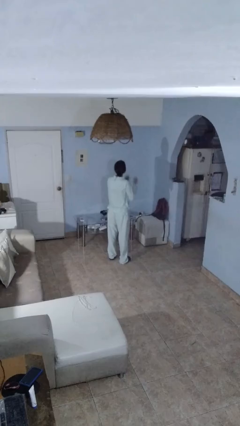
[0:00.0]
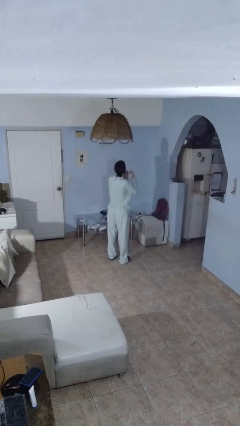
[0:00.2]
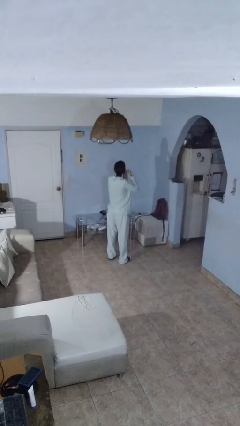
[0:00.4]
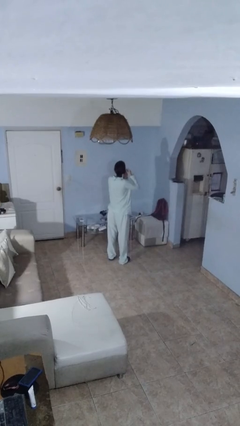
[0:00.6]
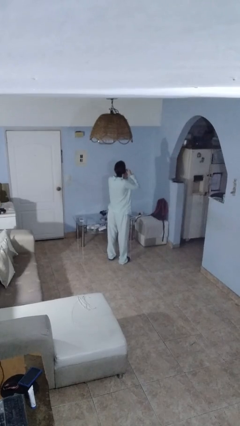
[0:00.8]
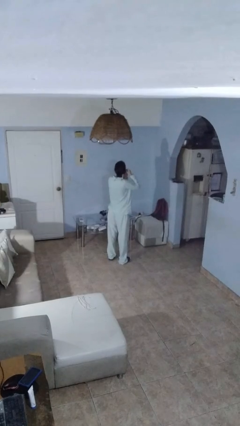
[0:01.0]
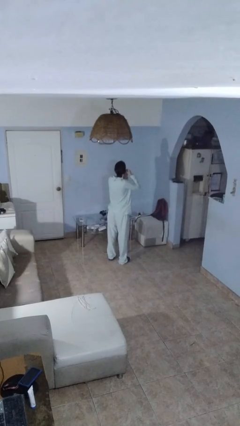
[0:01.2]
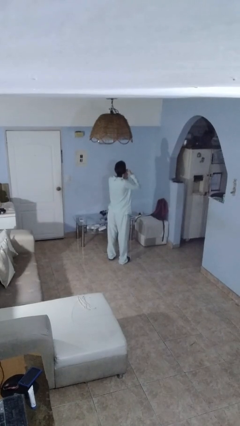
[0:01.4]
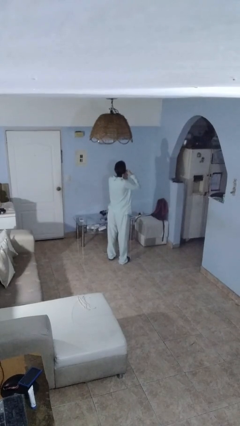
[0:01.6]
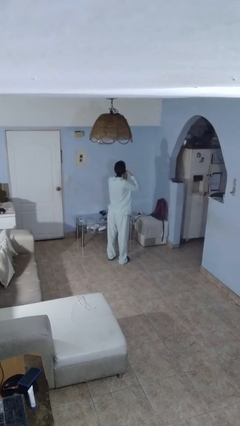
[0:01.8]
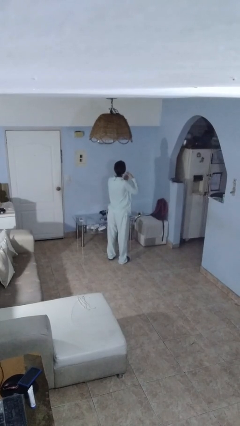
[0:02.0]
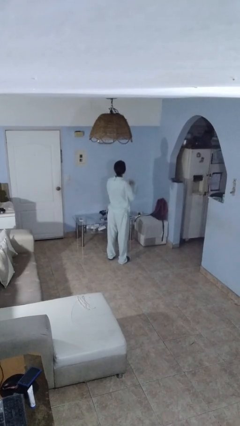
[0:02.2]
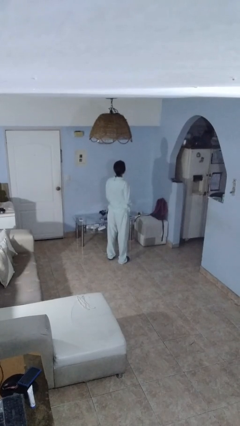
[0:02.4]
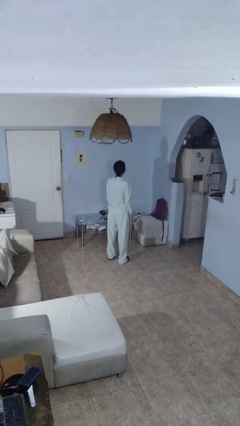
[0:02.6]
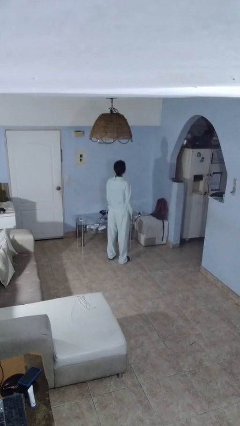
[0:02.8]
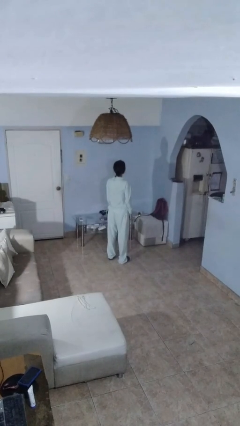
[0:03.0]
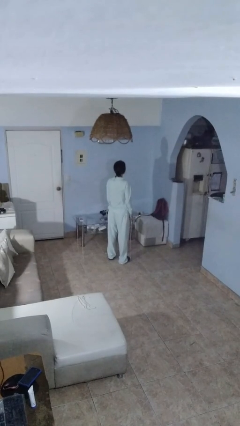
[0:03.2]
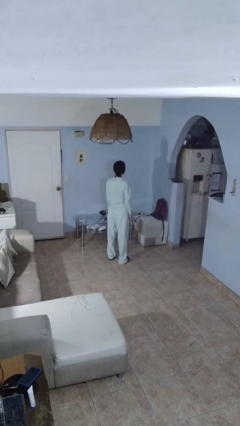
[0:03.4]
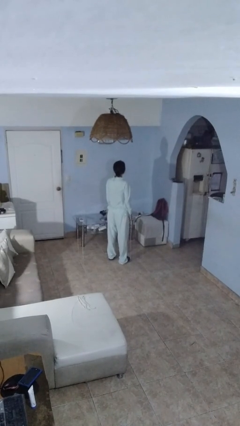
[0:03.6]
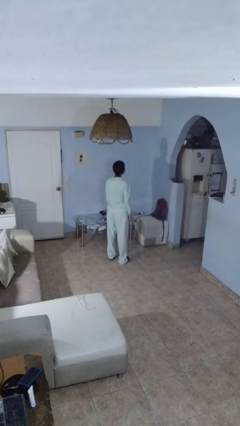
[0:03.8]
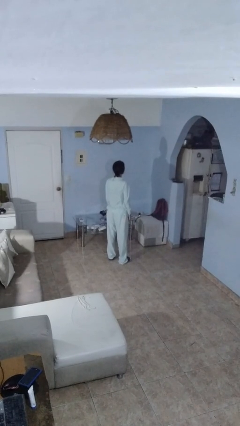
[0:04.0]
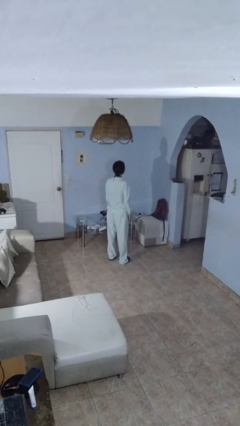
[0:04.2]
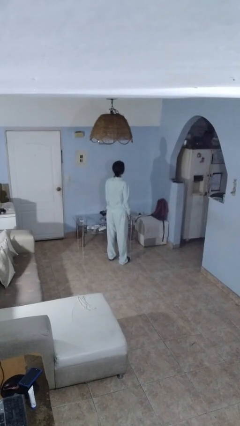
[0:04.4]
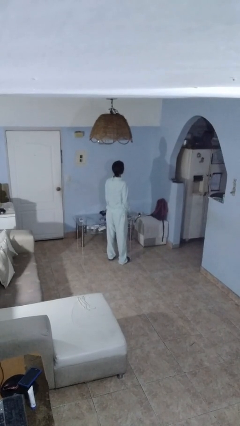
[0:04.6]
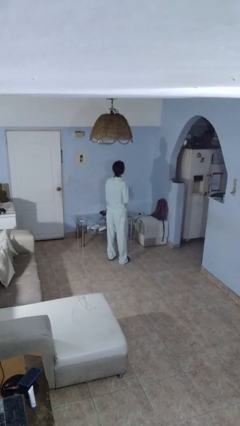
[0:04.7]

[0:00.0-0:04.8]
person puts on earrings

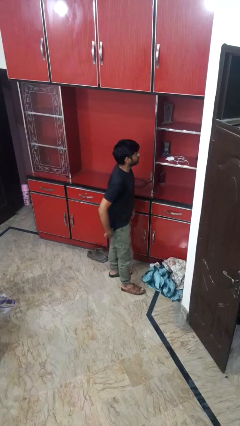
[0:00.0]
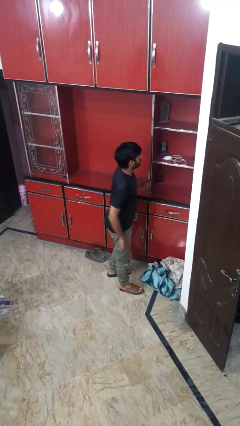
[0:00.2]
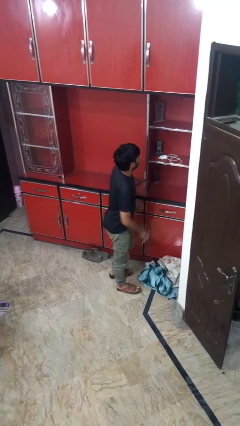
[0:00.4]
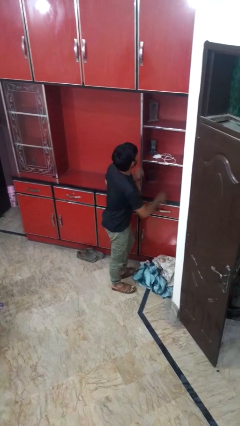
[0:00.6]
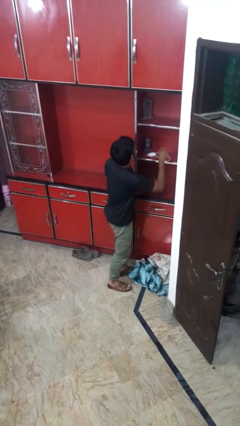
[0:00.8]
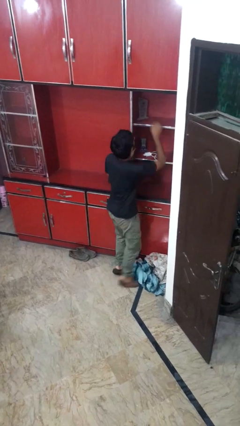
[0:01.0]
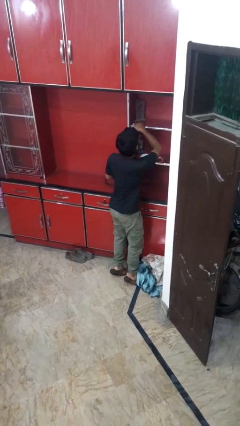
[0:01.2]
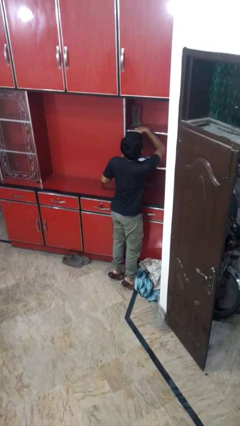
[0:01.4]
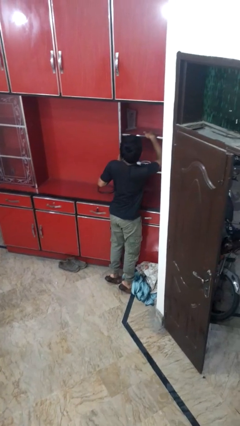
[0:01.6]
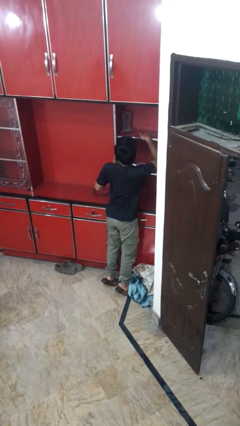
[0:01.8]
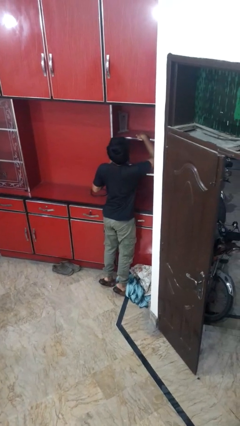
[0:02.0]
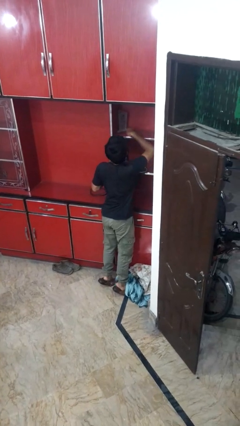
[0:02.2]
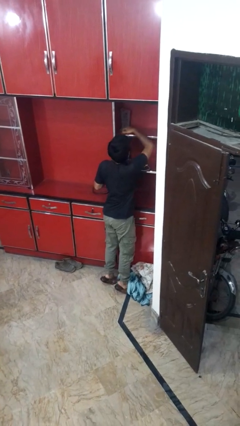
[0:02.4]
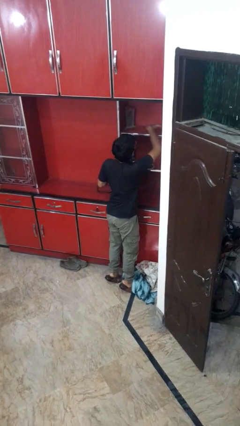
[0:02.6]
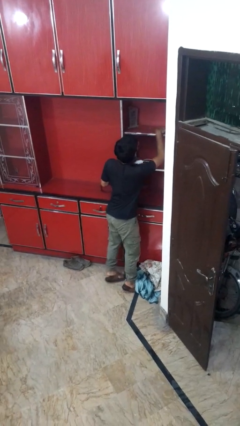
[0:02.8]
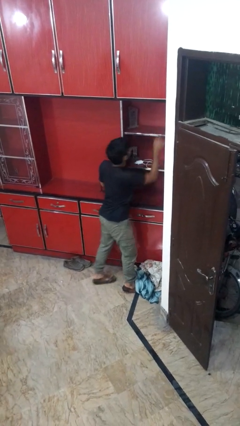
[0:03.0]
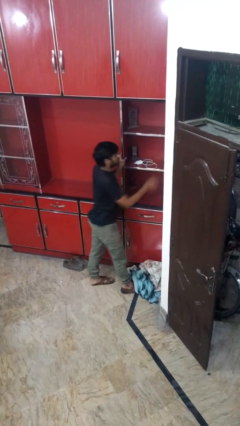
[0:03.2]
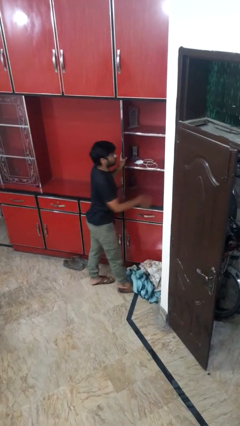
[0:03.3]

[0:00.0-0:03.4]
person searches in cabinet

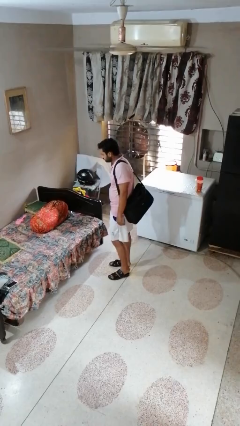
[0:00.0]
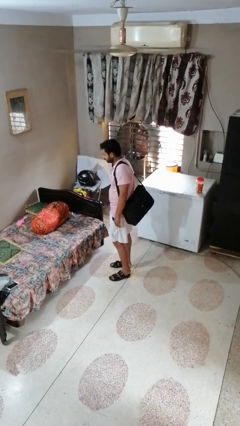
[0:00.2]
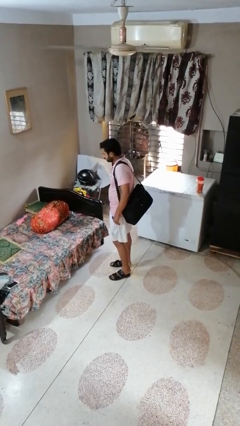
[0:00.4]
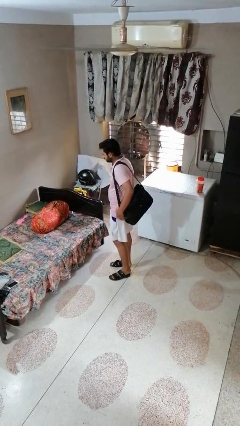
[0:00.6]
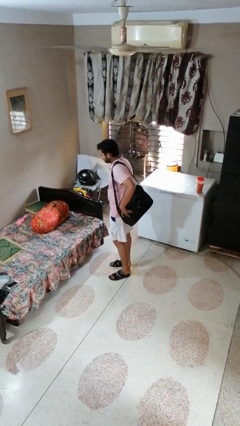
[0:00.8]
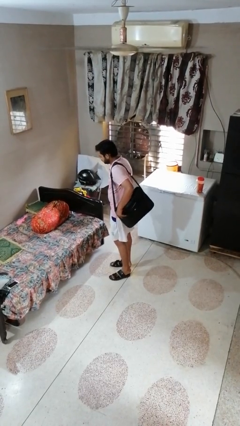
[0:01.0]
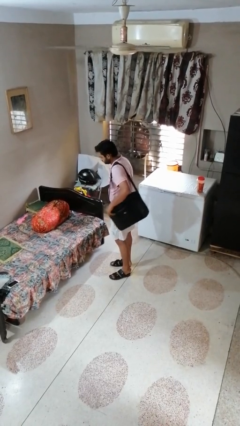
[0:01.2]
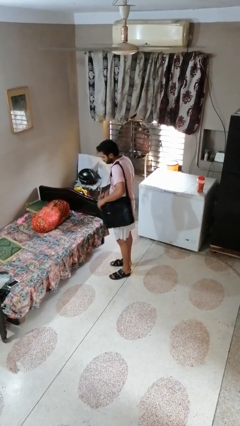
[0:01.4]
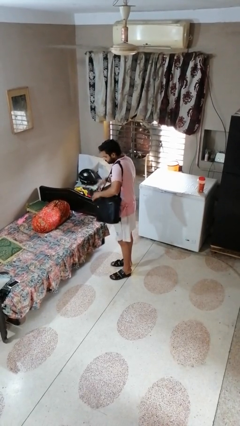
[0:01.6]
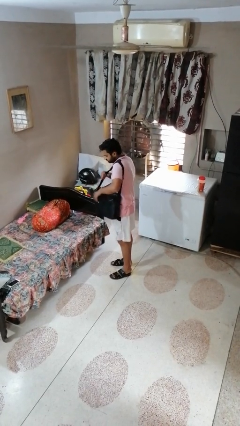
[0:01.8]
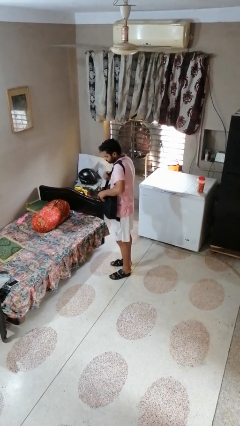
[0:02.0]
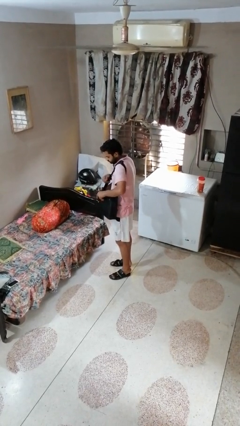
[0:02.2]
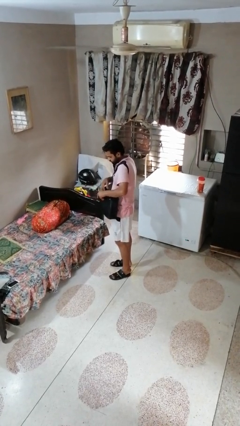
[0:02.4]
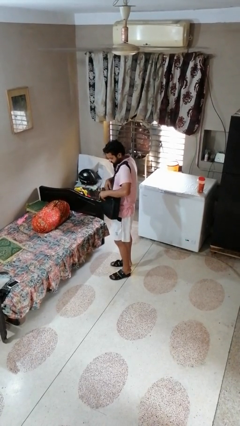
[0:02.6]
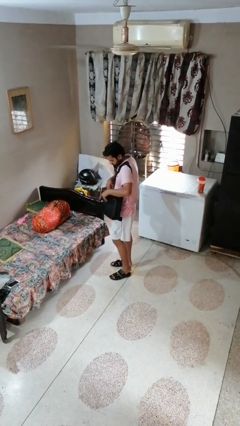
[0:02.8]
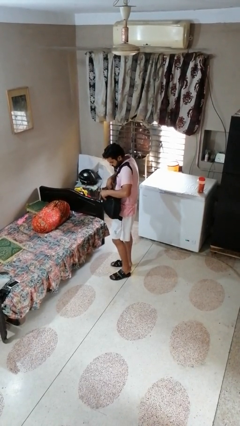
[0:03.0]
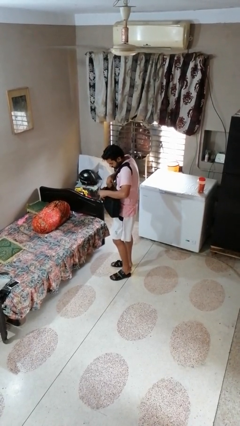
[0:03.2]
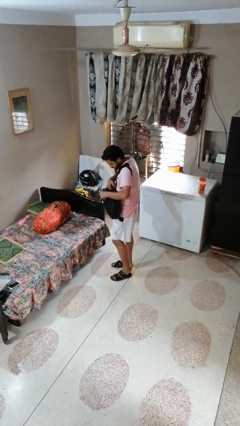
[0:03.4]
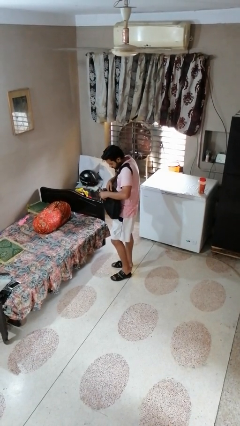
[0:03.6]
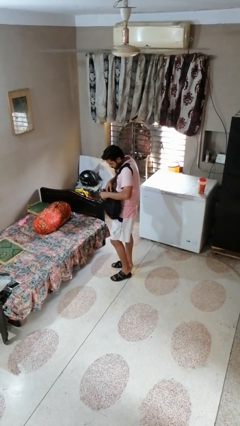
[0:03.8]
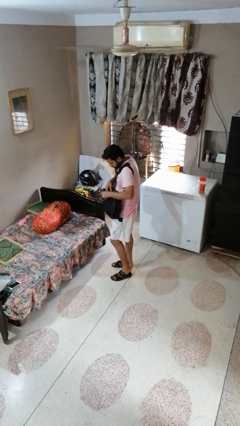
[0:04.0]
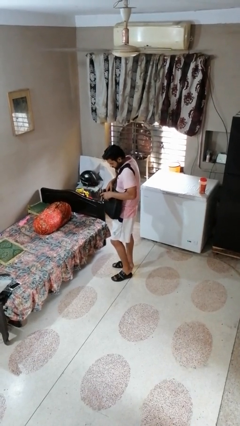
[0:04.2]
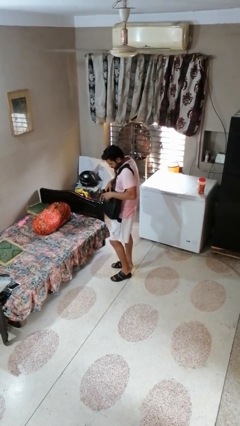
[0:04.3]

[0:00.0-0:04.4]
person searches in backpack

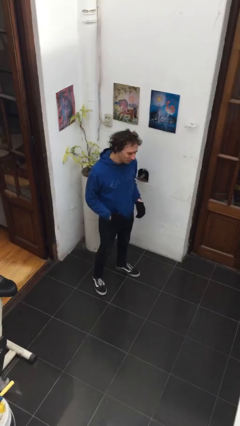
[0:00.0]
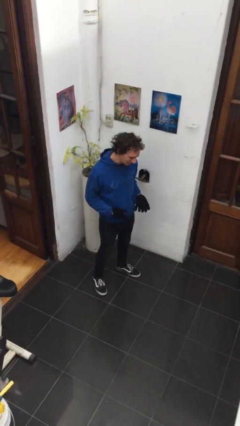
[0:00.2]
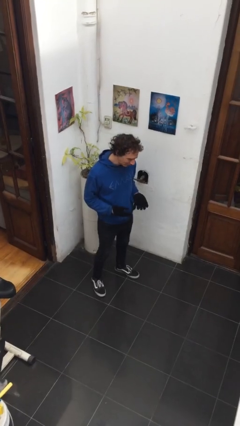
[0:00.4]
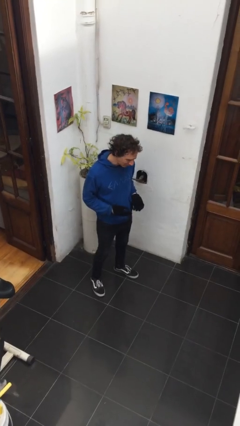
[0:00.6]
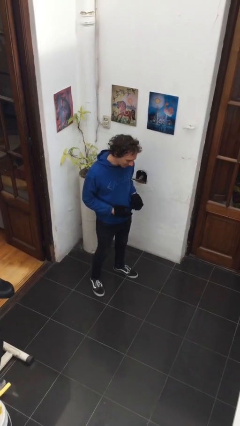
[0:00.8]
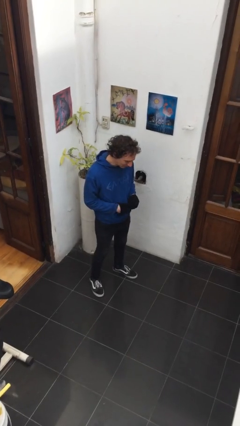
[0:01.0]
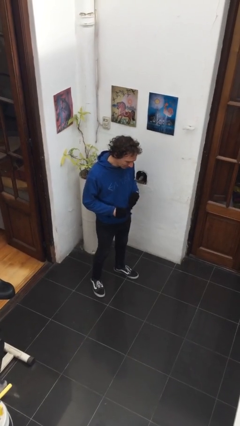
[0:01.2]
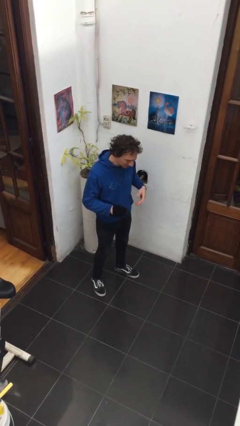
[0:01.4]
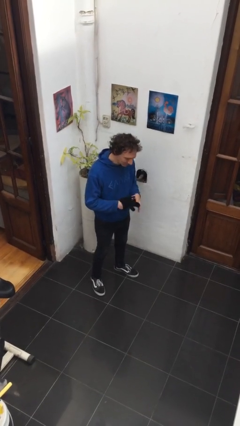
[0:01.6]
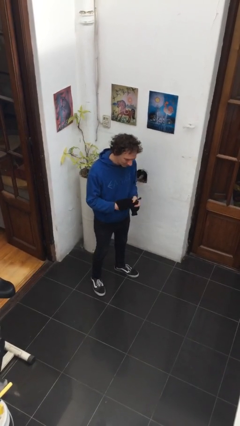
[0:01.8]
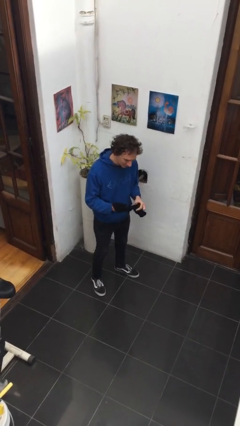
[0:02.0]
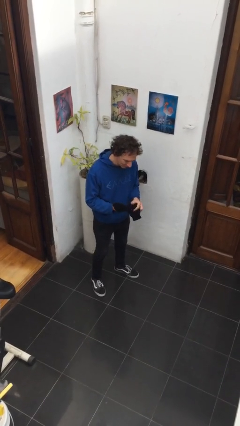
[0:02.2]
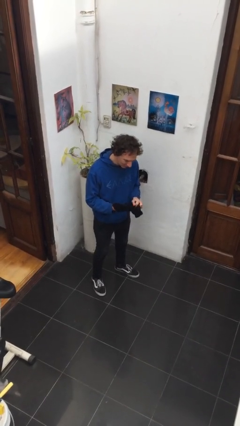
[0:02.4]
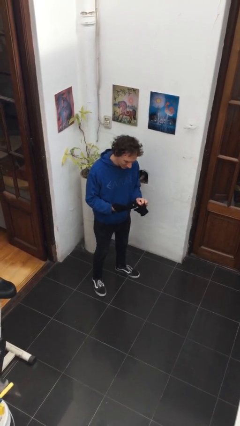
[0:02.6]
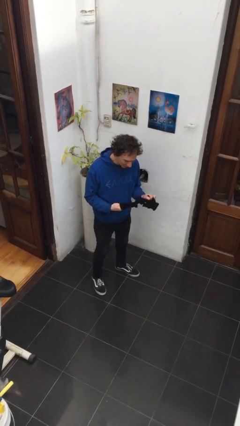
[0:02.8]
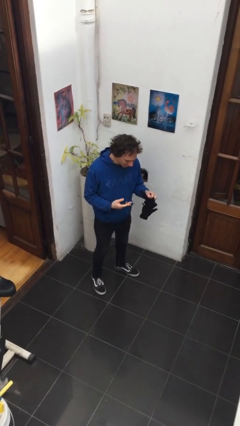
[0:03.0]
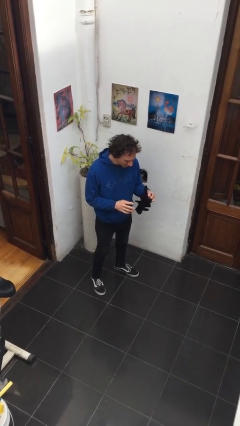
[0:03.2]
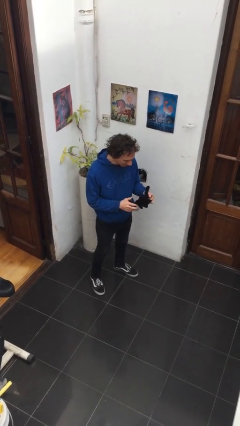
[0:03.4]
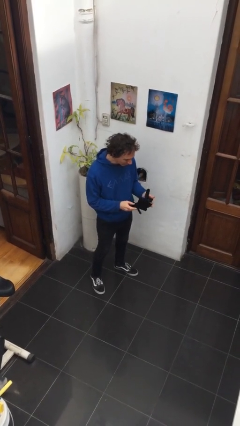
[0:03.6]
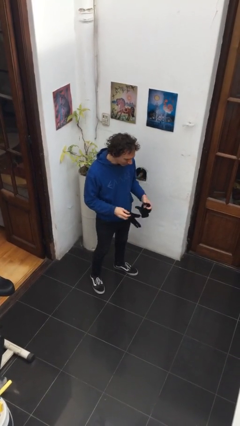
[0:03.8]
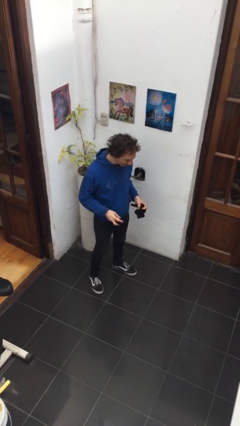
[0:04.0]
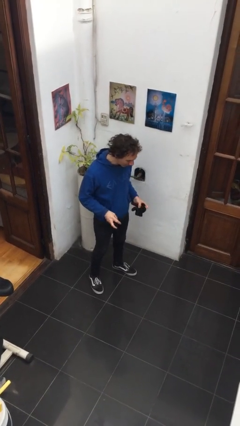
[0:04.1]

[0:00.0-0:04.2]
person takes off gloves

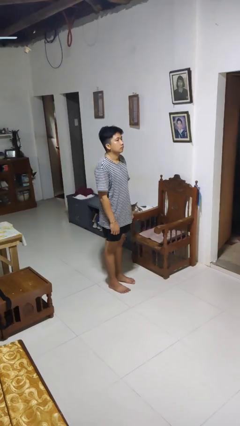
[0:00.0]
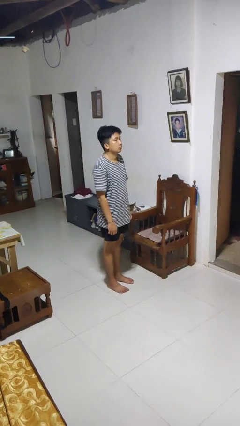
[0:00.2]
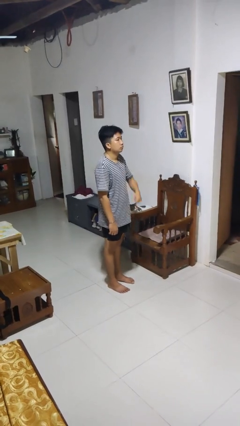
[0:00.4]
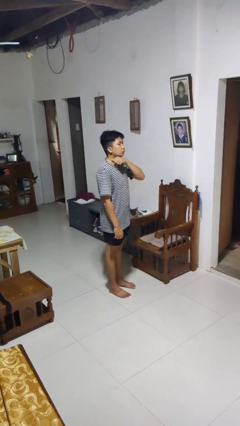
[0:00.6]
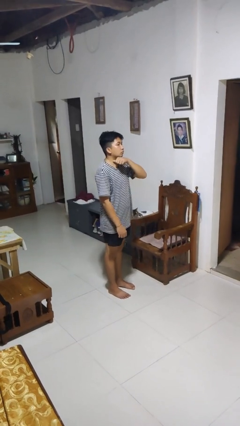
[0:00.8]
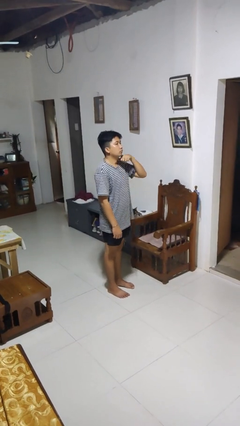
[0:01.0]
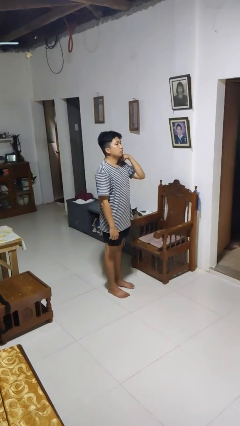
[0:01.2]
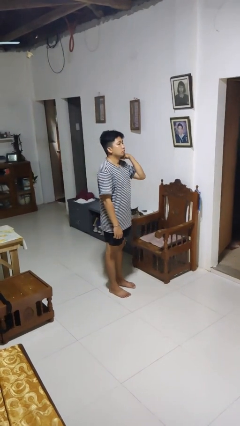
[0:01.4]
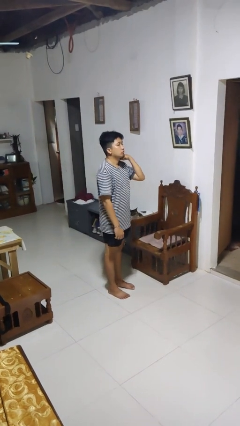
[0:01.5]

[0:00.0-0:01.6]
person gestures cut
